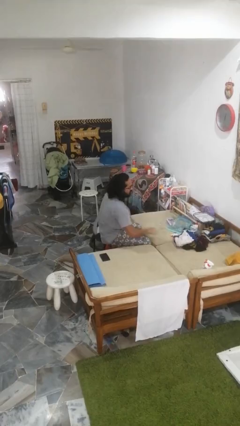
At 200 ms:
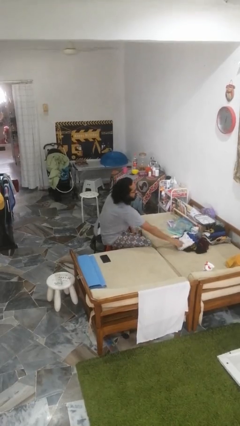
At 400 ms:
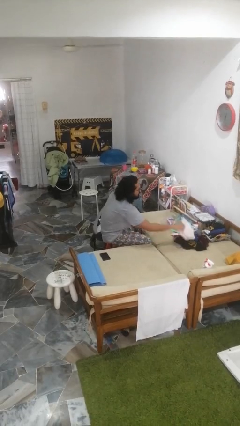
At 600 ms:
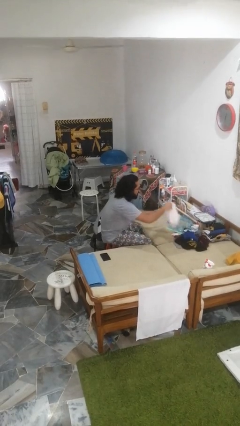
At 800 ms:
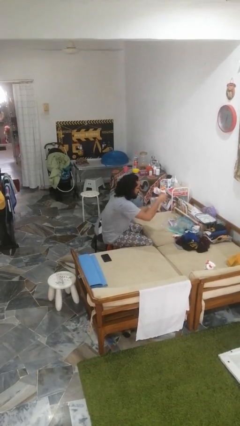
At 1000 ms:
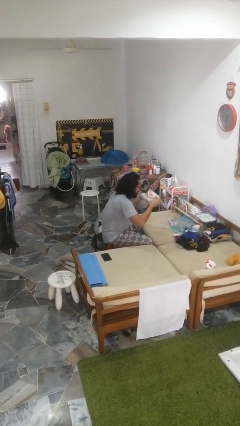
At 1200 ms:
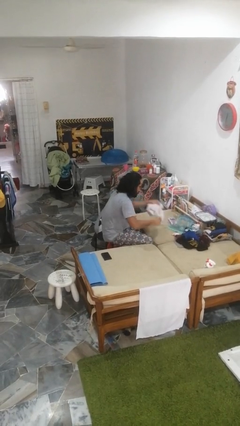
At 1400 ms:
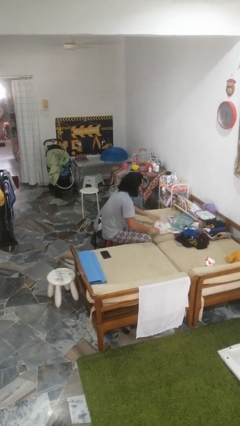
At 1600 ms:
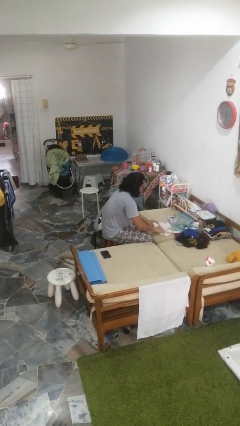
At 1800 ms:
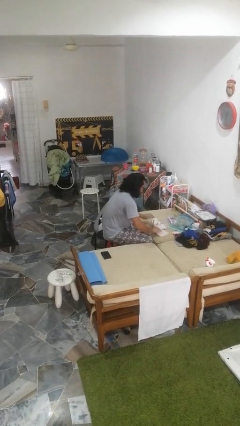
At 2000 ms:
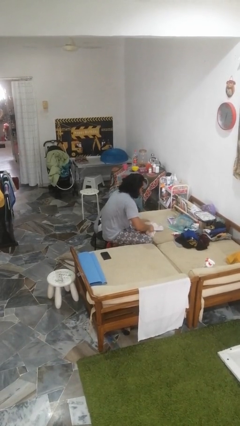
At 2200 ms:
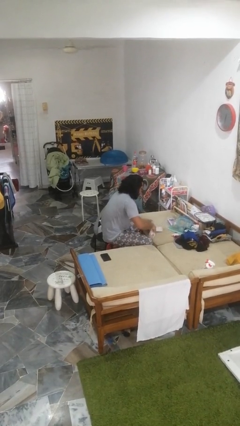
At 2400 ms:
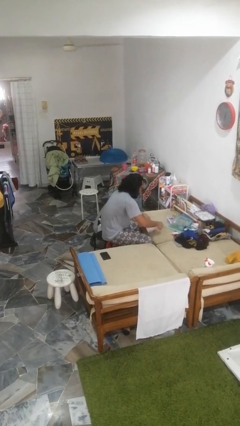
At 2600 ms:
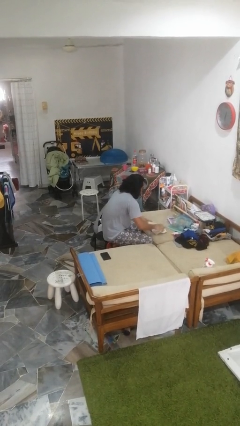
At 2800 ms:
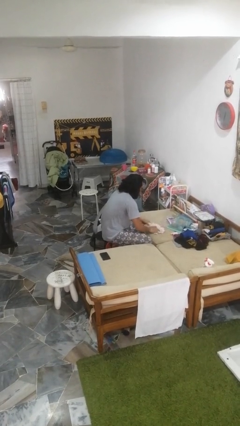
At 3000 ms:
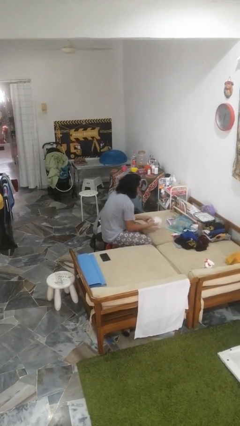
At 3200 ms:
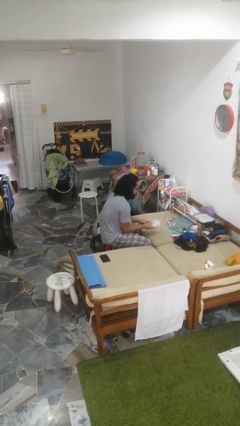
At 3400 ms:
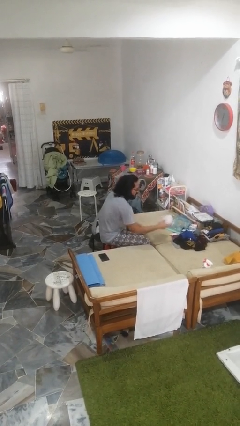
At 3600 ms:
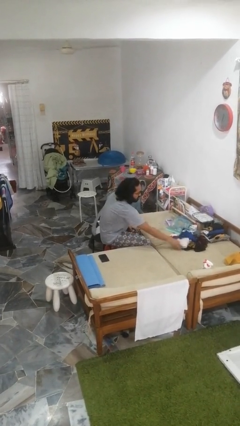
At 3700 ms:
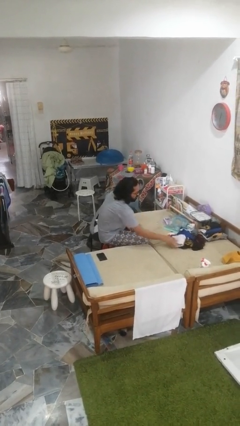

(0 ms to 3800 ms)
person folds pants

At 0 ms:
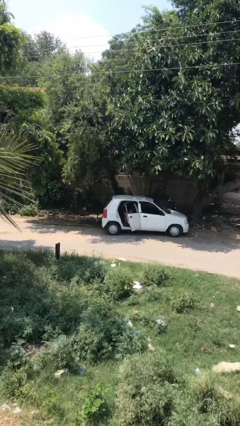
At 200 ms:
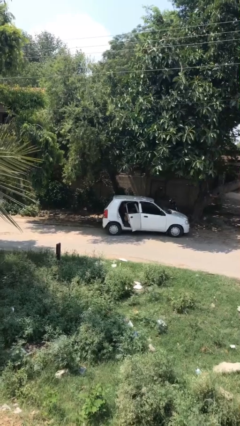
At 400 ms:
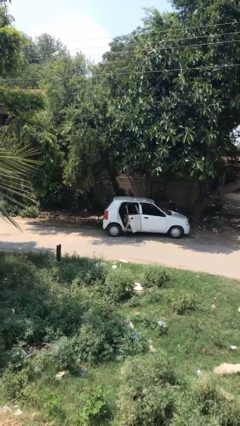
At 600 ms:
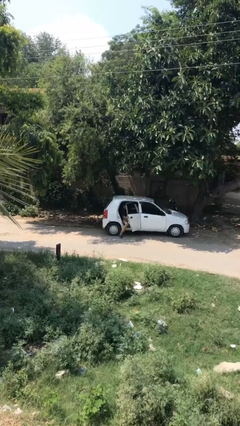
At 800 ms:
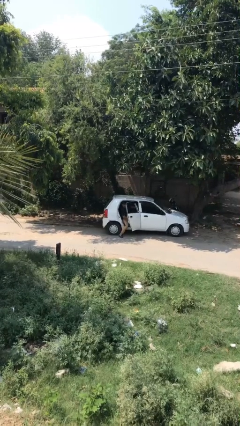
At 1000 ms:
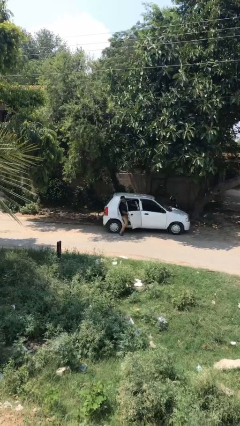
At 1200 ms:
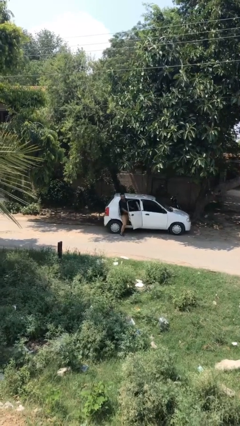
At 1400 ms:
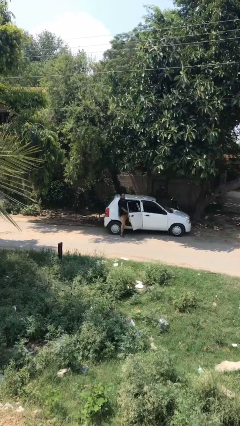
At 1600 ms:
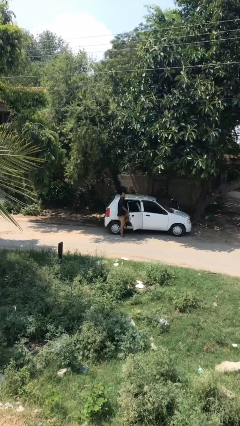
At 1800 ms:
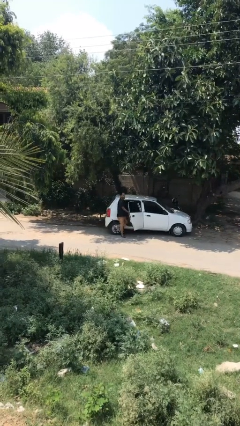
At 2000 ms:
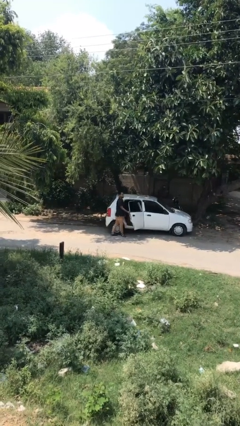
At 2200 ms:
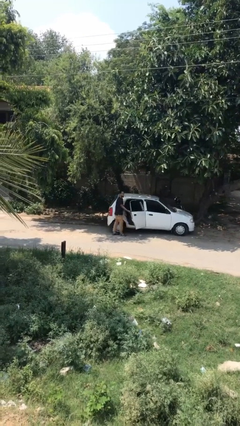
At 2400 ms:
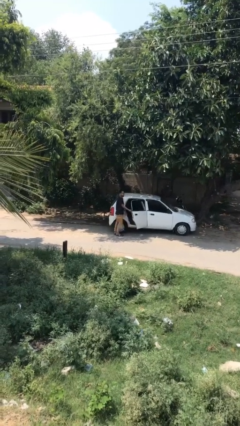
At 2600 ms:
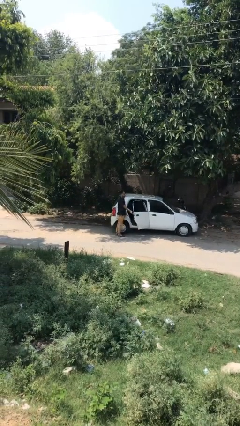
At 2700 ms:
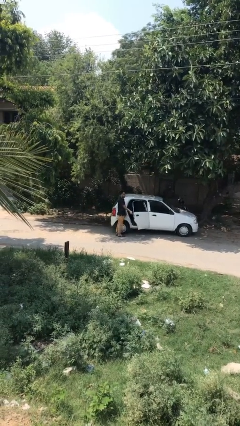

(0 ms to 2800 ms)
person exits car

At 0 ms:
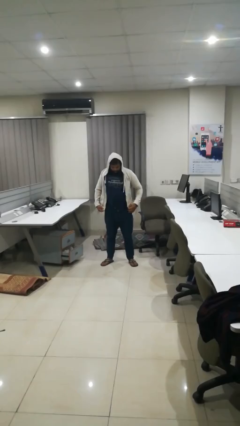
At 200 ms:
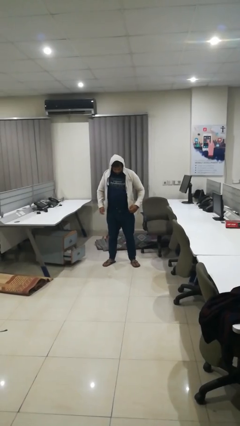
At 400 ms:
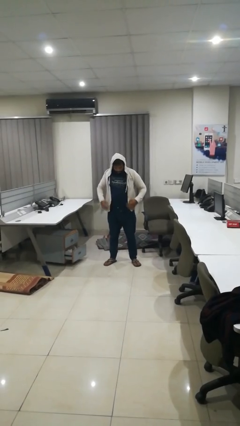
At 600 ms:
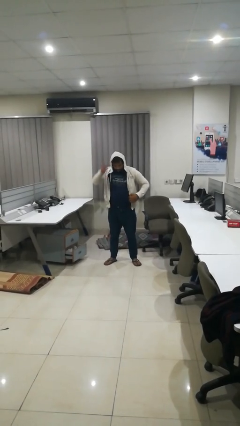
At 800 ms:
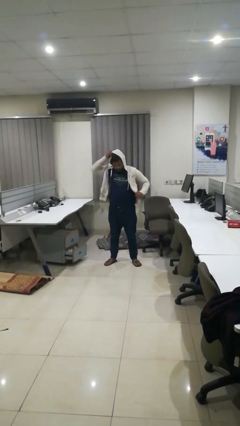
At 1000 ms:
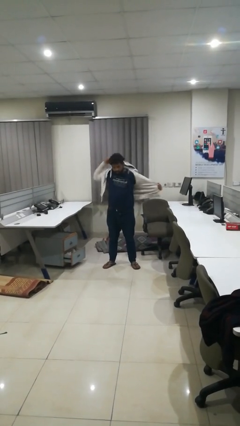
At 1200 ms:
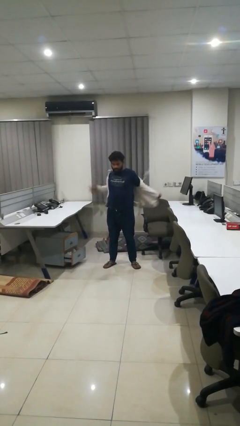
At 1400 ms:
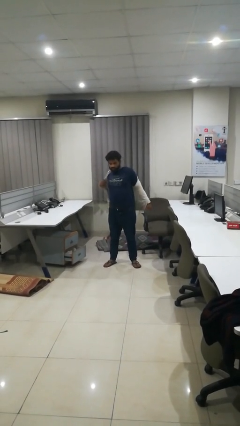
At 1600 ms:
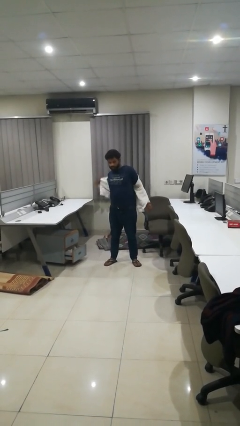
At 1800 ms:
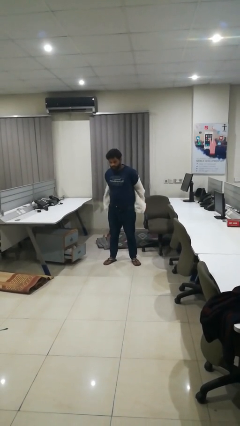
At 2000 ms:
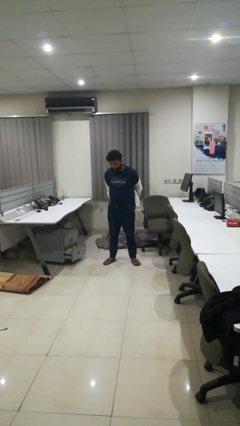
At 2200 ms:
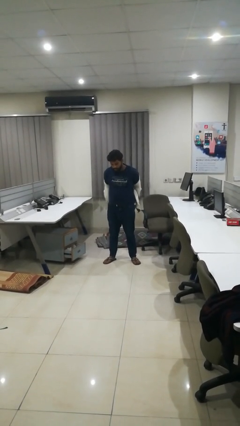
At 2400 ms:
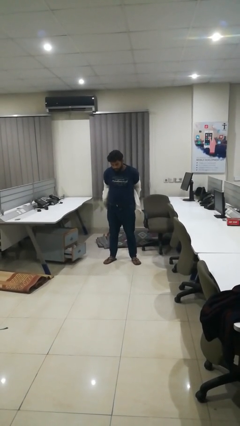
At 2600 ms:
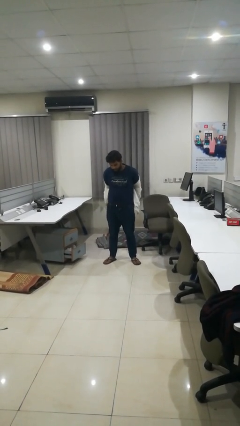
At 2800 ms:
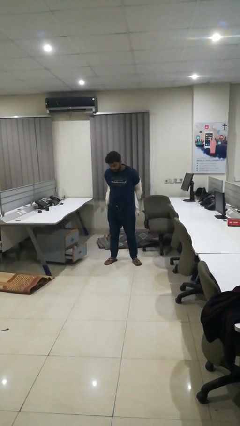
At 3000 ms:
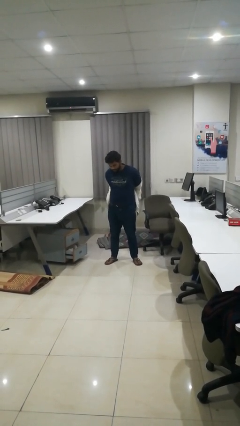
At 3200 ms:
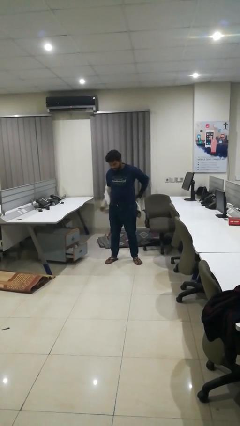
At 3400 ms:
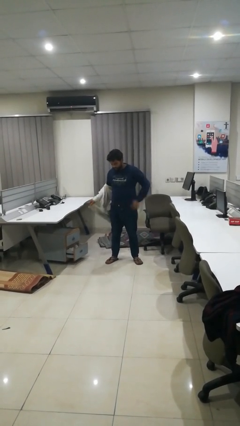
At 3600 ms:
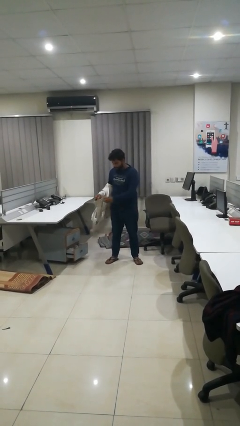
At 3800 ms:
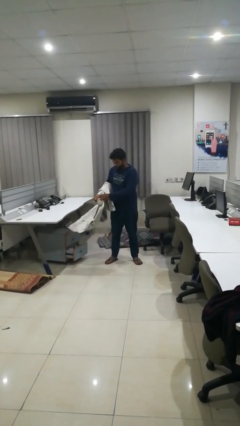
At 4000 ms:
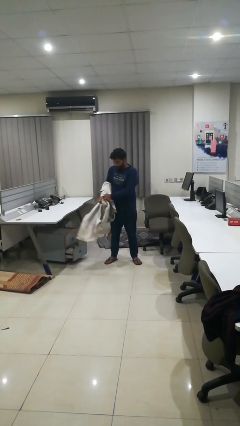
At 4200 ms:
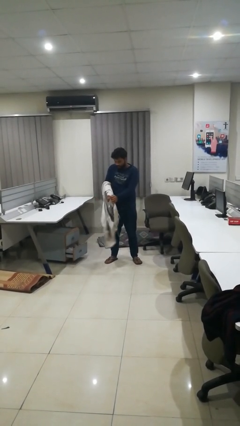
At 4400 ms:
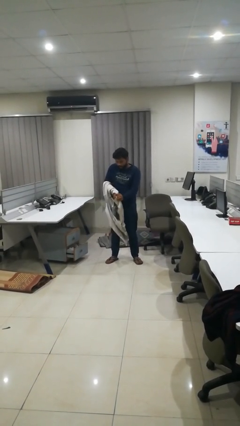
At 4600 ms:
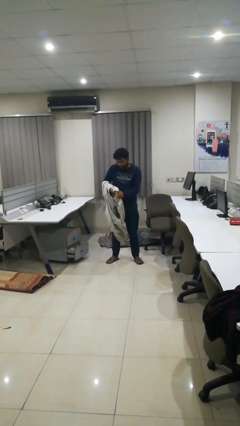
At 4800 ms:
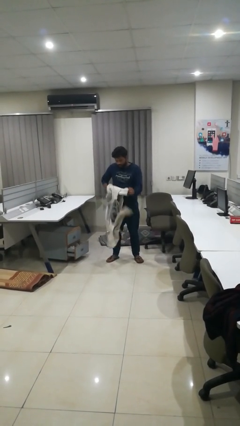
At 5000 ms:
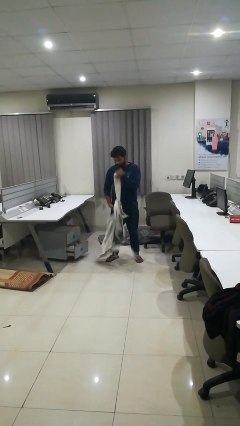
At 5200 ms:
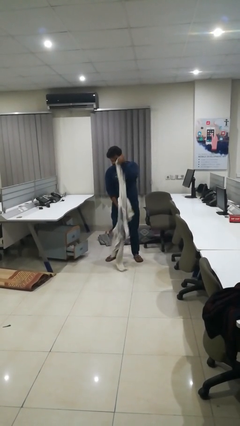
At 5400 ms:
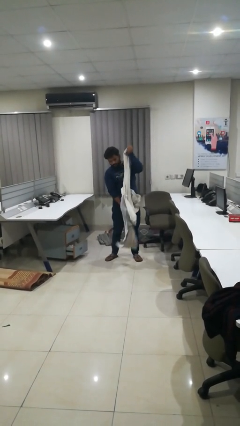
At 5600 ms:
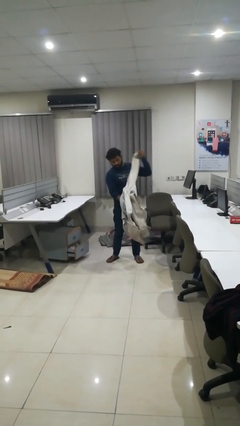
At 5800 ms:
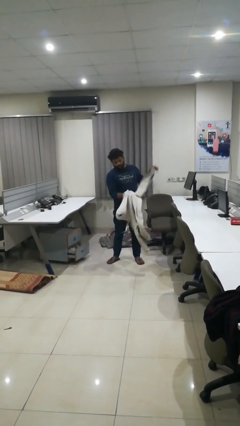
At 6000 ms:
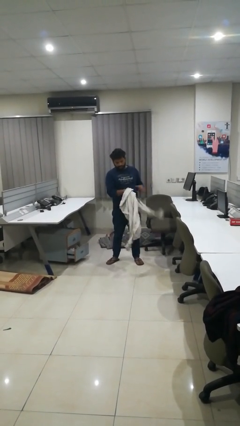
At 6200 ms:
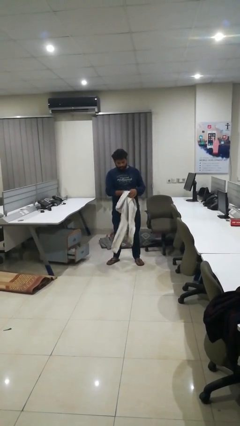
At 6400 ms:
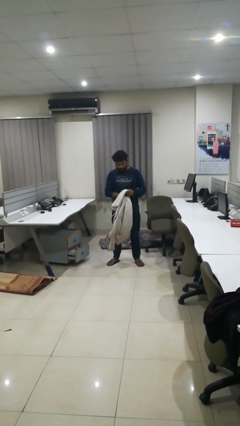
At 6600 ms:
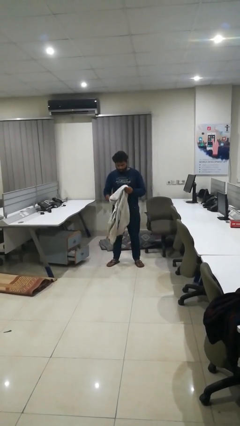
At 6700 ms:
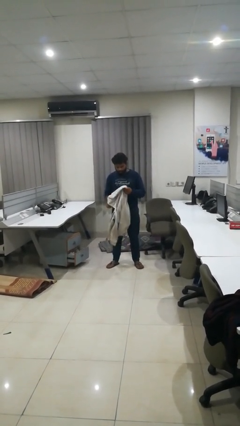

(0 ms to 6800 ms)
person takes off hoodie

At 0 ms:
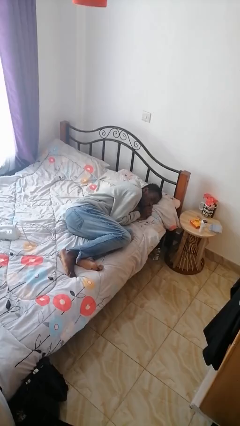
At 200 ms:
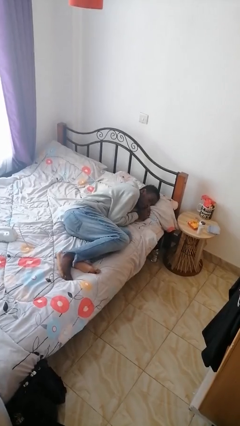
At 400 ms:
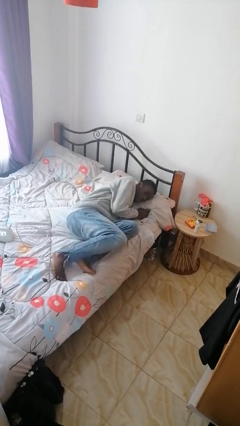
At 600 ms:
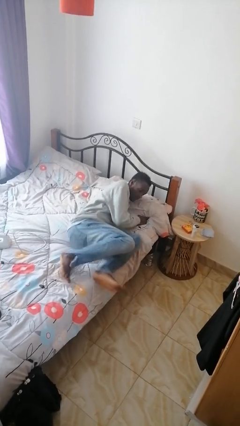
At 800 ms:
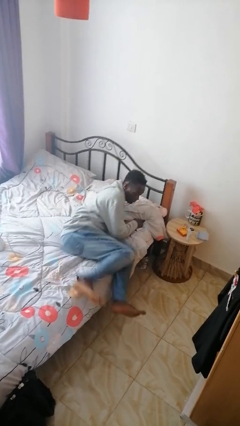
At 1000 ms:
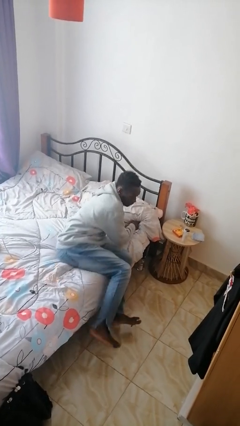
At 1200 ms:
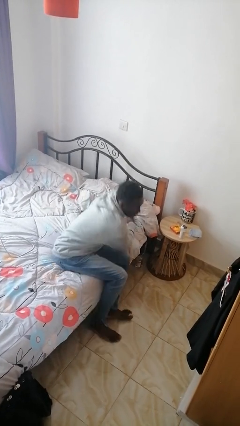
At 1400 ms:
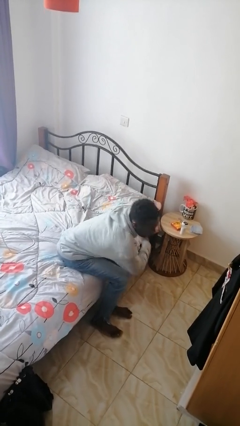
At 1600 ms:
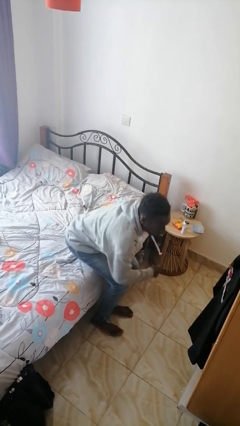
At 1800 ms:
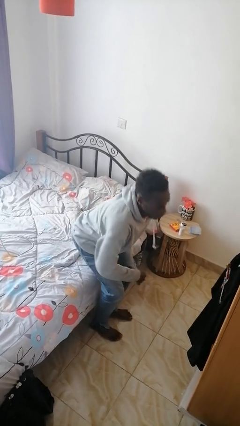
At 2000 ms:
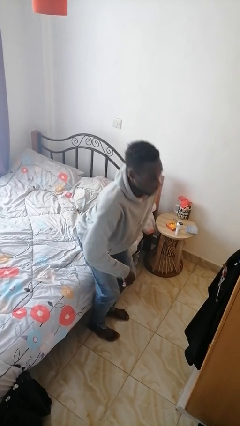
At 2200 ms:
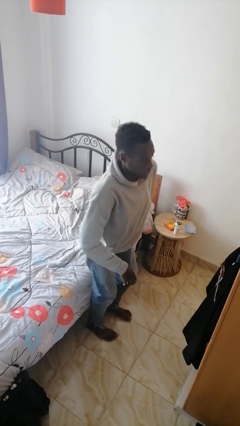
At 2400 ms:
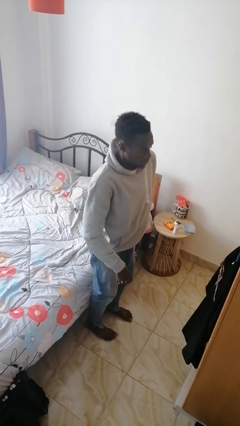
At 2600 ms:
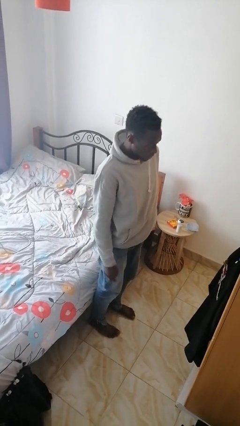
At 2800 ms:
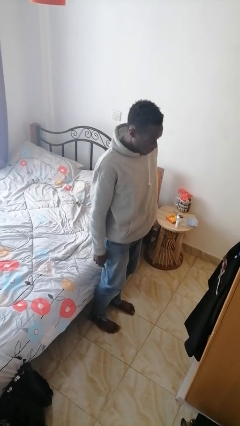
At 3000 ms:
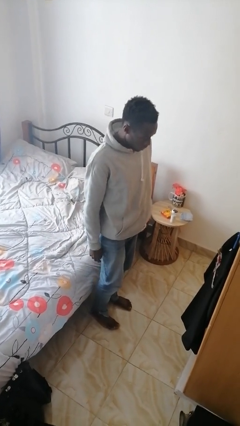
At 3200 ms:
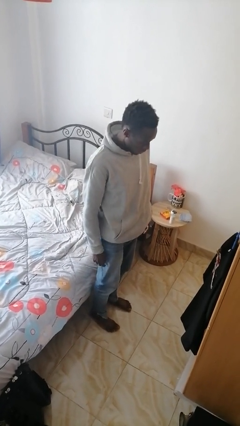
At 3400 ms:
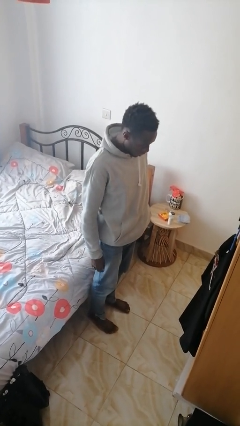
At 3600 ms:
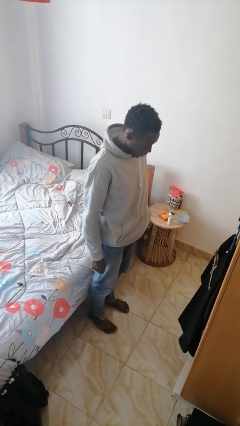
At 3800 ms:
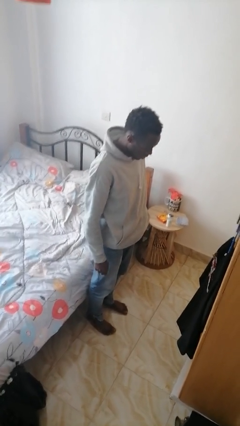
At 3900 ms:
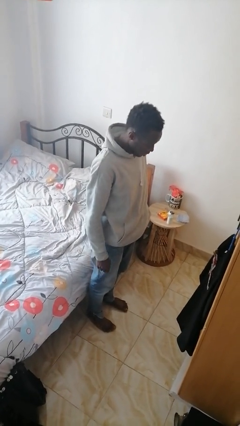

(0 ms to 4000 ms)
person stands up

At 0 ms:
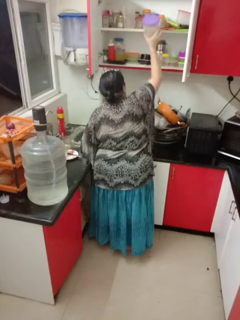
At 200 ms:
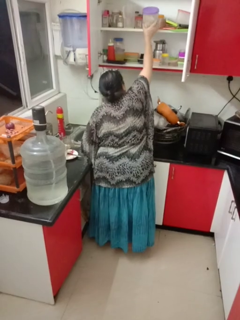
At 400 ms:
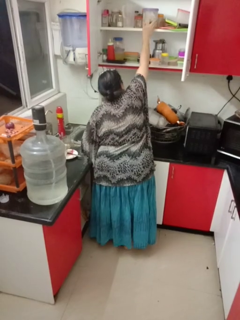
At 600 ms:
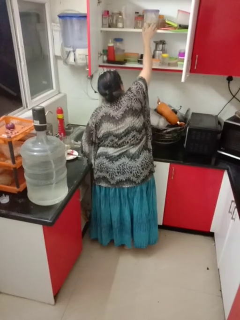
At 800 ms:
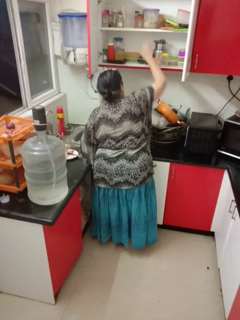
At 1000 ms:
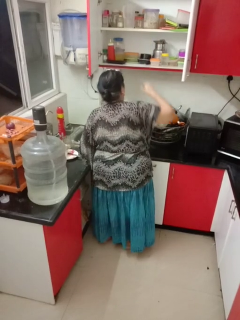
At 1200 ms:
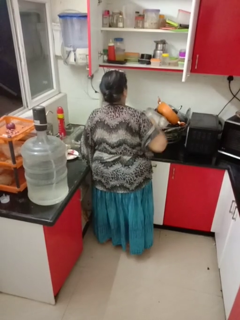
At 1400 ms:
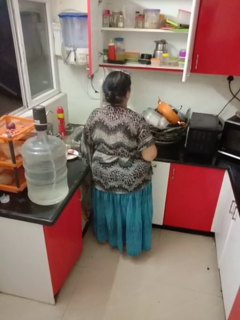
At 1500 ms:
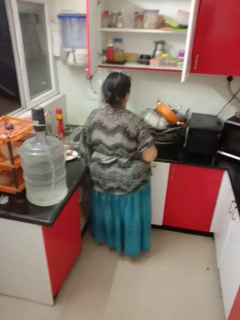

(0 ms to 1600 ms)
person puts object in cabinet
